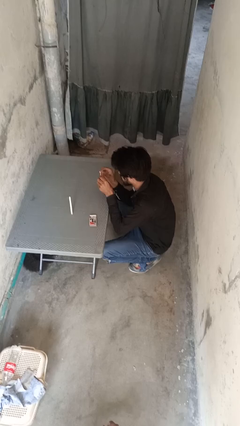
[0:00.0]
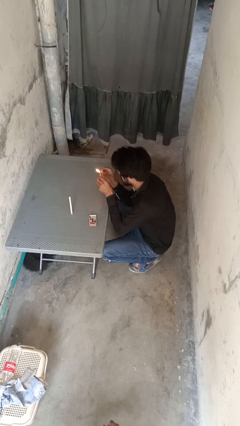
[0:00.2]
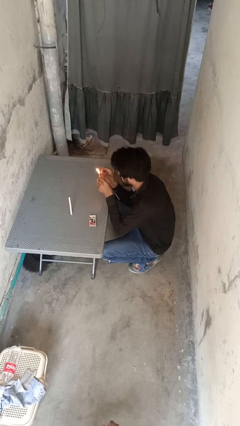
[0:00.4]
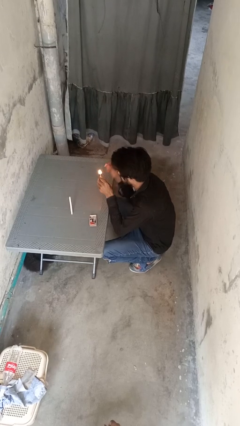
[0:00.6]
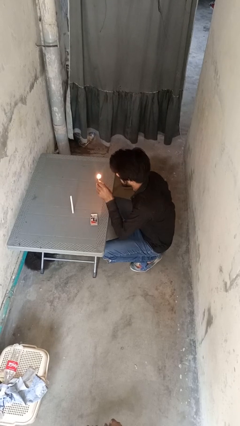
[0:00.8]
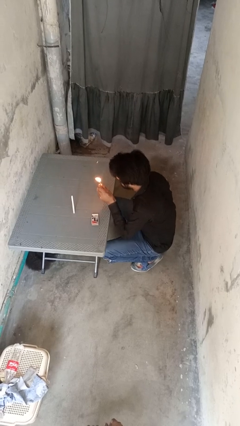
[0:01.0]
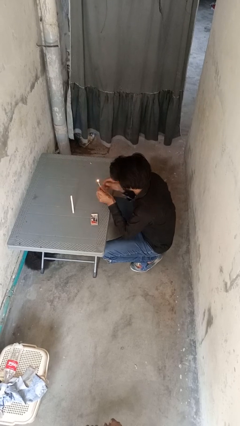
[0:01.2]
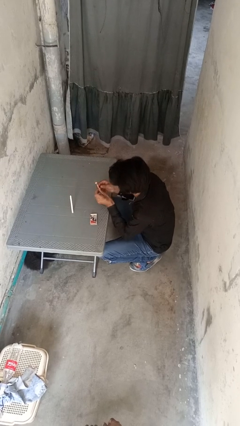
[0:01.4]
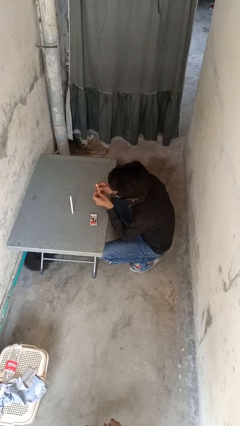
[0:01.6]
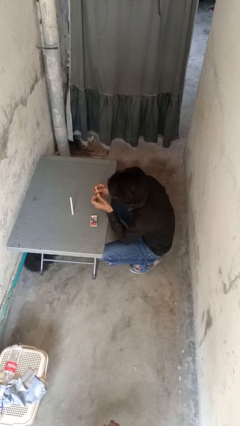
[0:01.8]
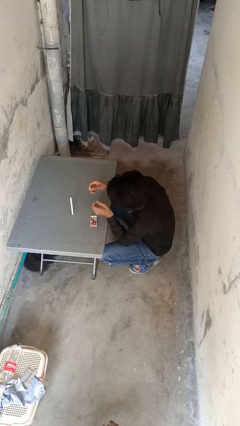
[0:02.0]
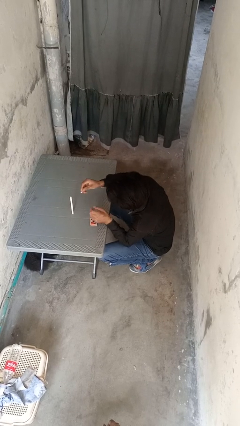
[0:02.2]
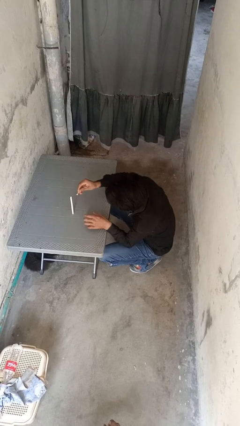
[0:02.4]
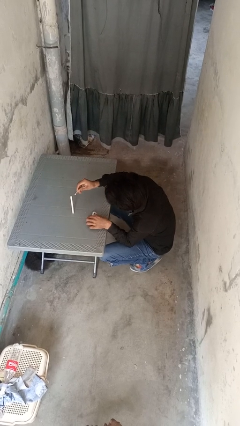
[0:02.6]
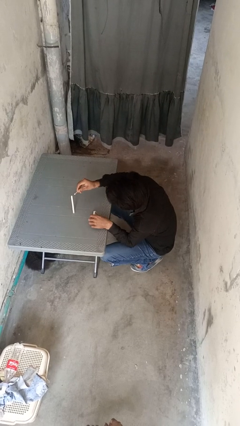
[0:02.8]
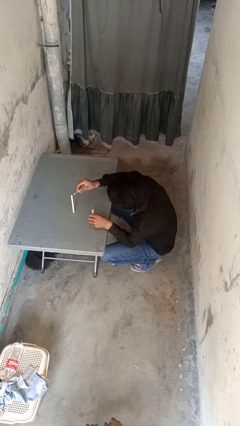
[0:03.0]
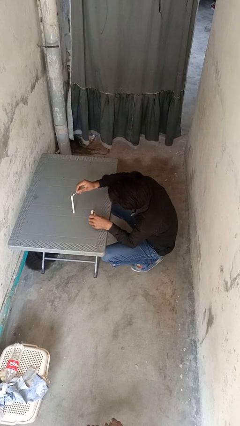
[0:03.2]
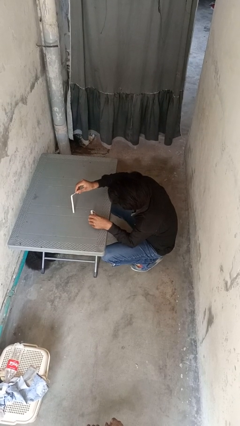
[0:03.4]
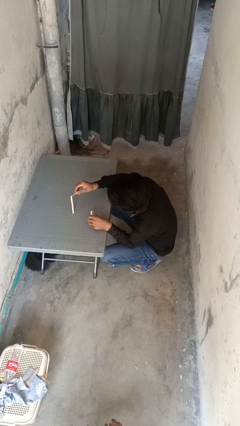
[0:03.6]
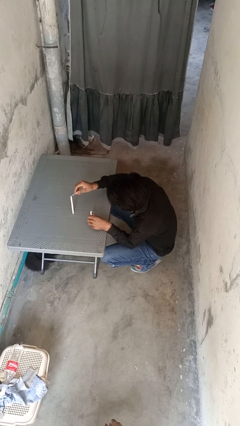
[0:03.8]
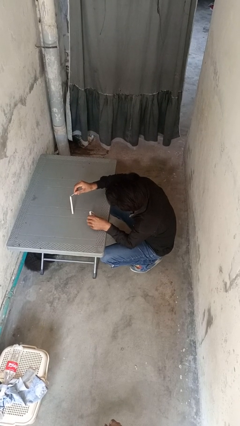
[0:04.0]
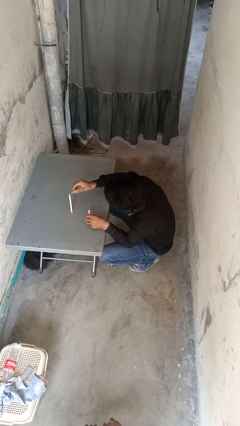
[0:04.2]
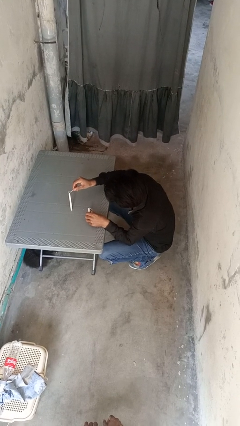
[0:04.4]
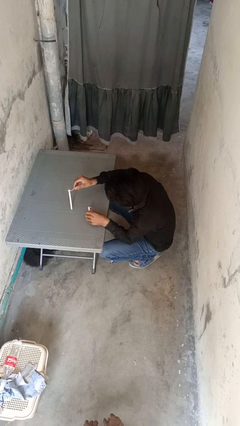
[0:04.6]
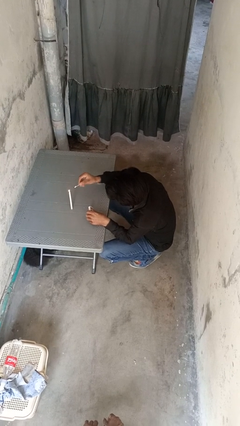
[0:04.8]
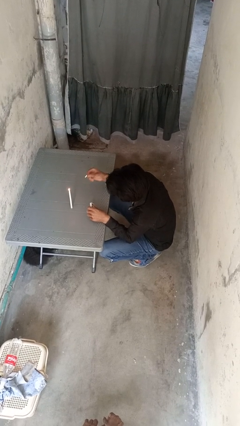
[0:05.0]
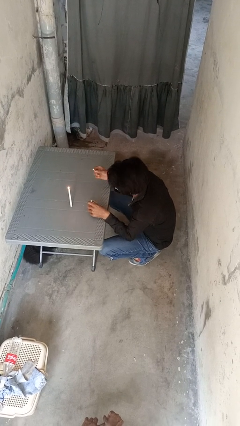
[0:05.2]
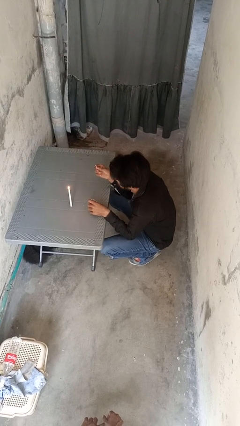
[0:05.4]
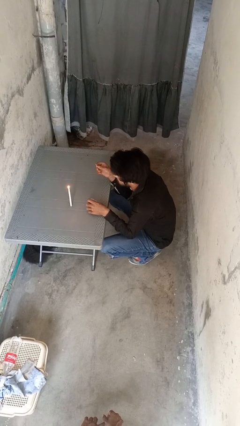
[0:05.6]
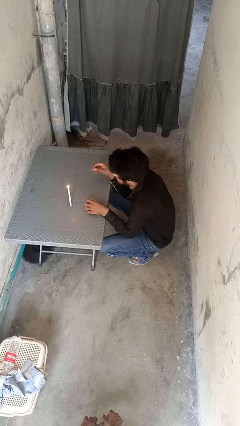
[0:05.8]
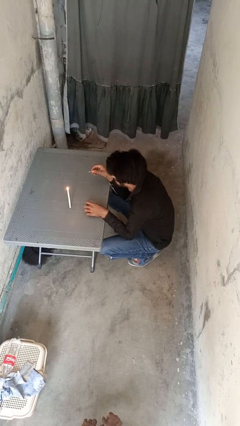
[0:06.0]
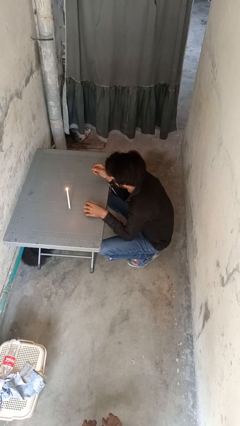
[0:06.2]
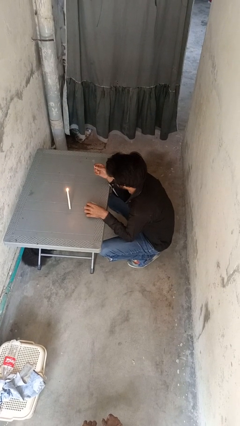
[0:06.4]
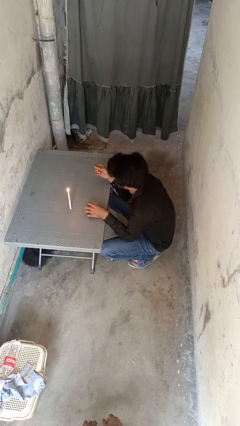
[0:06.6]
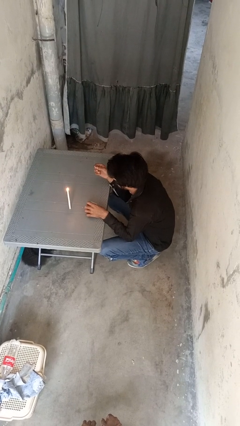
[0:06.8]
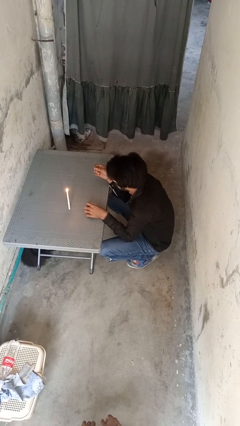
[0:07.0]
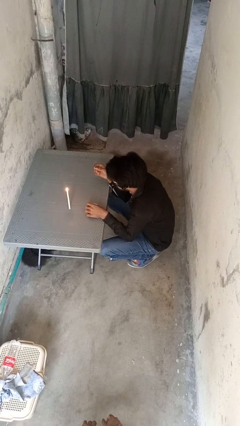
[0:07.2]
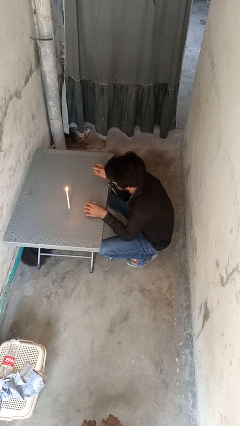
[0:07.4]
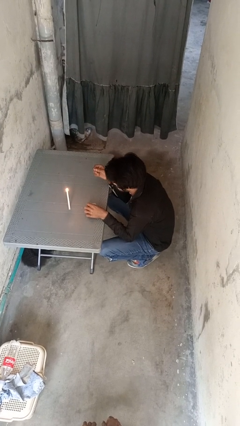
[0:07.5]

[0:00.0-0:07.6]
person lights candle

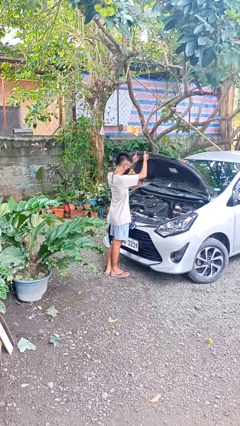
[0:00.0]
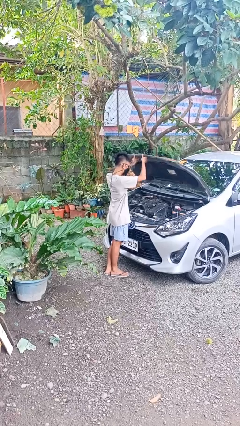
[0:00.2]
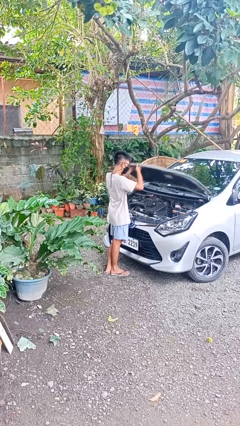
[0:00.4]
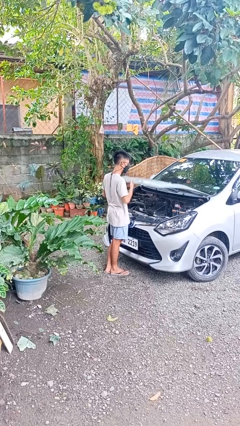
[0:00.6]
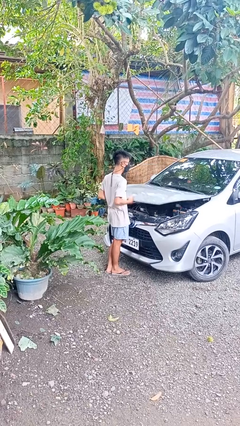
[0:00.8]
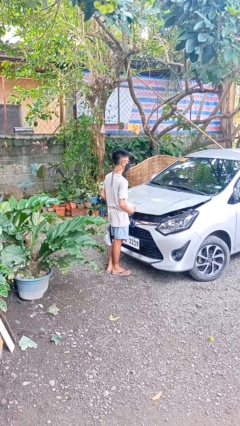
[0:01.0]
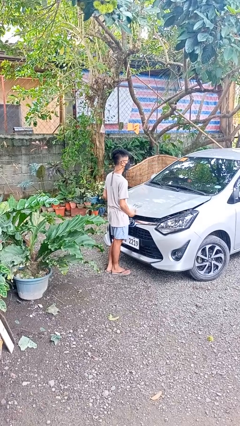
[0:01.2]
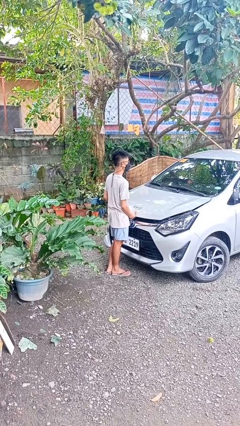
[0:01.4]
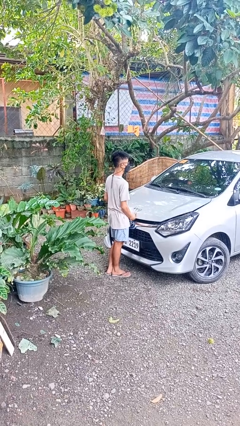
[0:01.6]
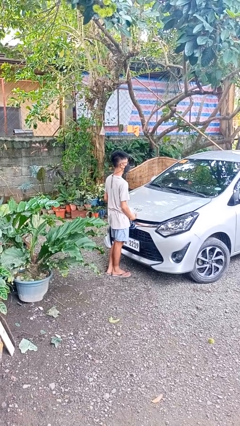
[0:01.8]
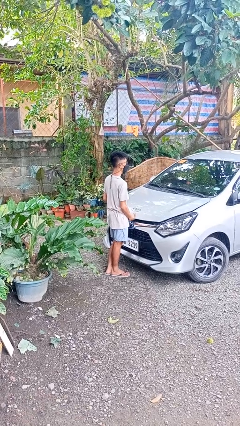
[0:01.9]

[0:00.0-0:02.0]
person closes car hood

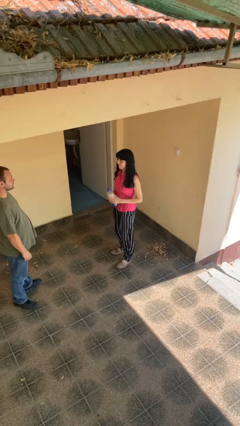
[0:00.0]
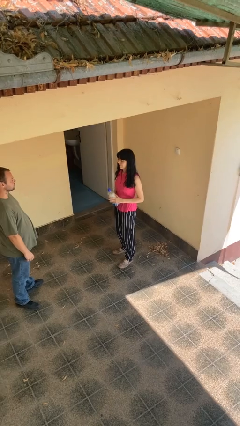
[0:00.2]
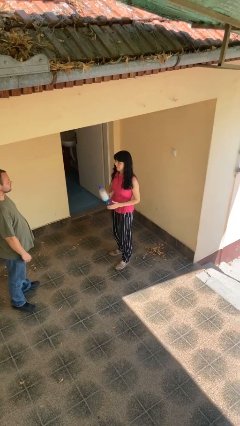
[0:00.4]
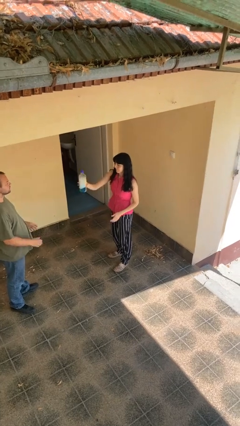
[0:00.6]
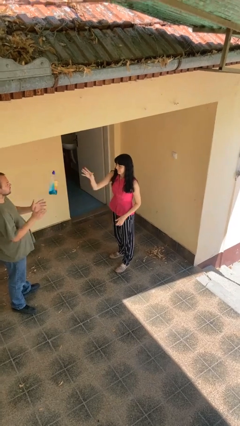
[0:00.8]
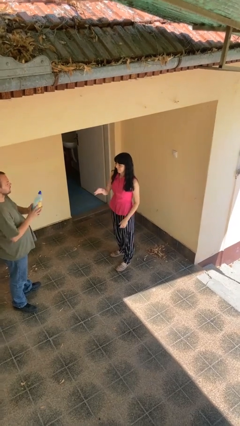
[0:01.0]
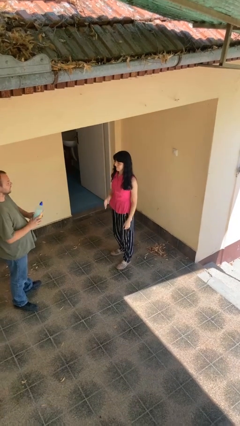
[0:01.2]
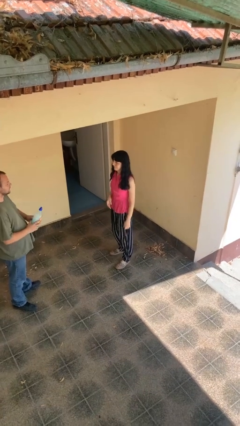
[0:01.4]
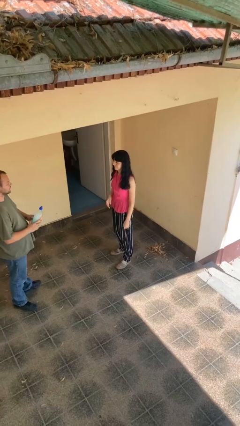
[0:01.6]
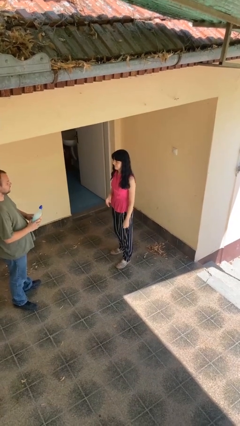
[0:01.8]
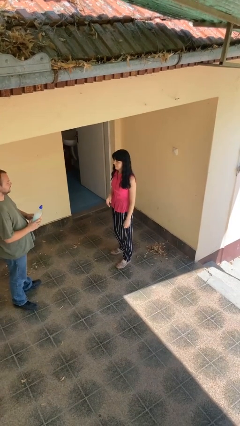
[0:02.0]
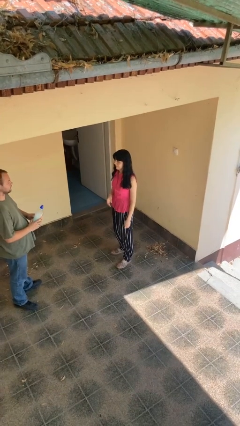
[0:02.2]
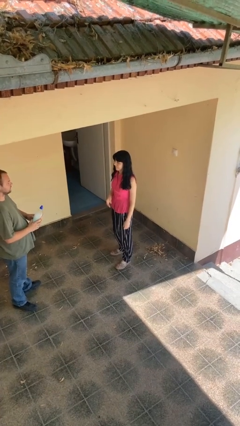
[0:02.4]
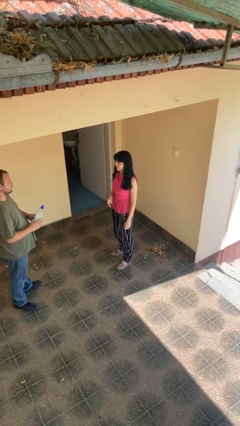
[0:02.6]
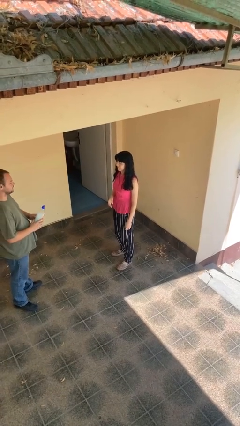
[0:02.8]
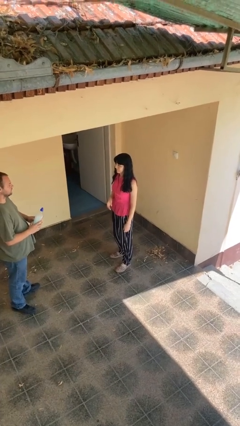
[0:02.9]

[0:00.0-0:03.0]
person throws object to person

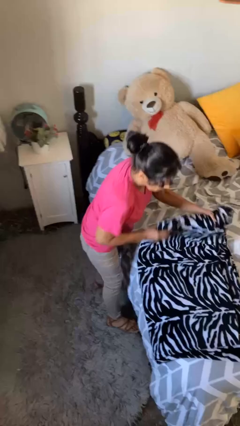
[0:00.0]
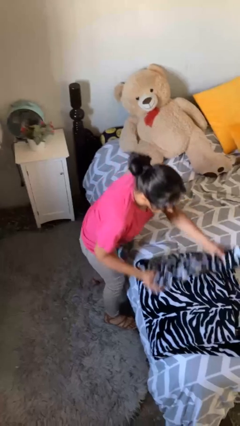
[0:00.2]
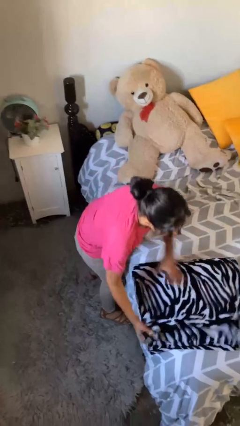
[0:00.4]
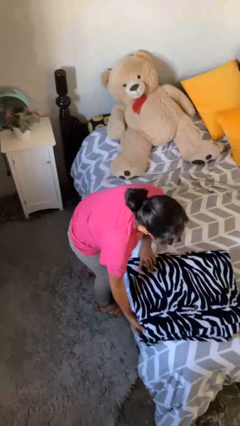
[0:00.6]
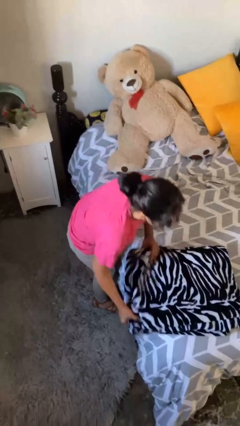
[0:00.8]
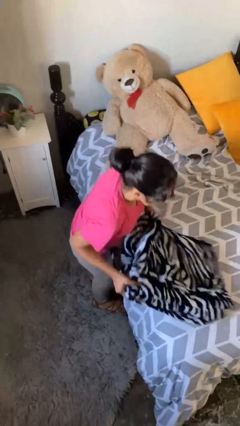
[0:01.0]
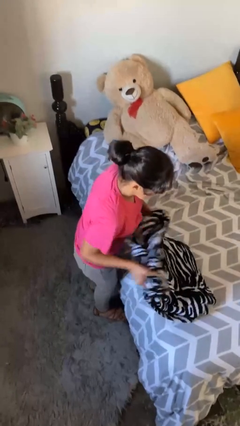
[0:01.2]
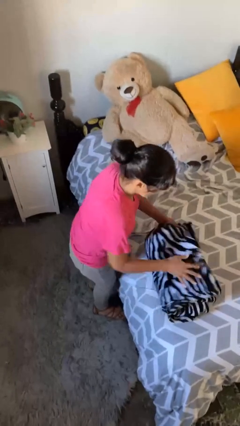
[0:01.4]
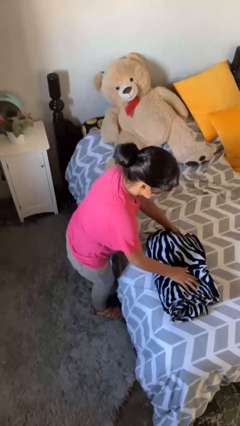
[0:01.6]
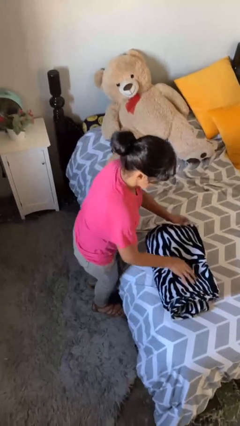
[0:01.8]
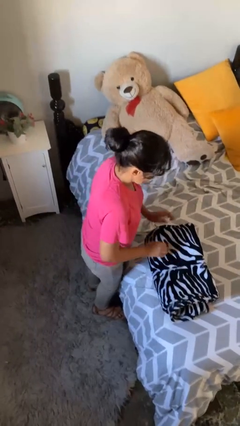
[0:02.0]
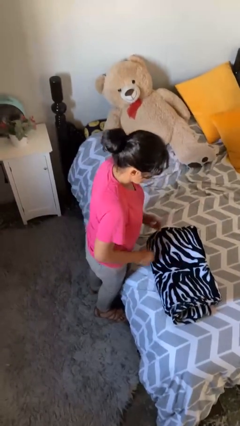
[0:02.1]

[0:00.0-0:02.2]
person folds blanket

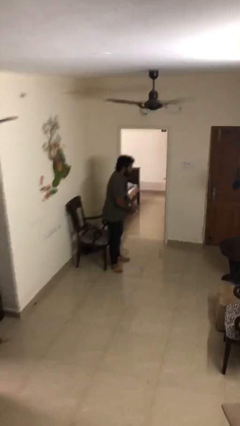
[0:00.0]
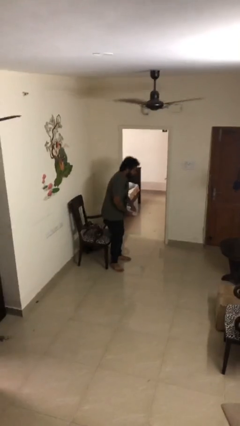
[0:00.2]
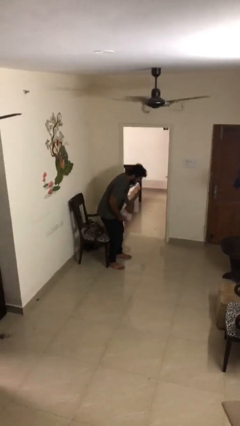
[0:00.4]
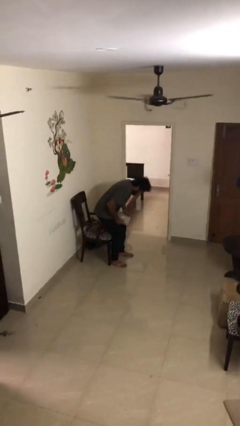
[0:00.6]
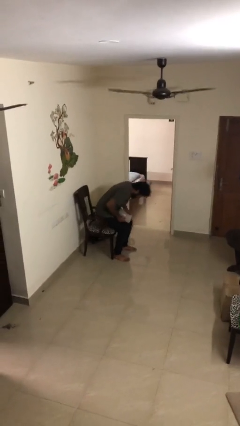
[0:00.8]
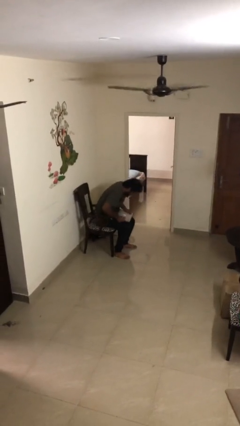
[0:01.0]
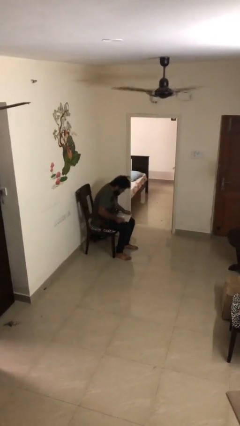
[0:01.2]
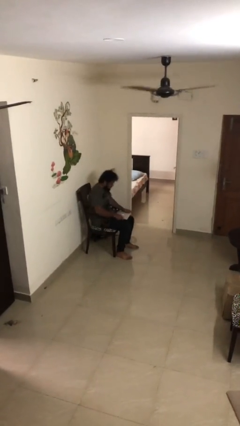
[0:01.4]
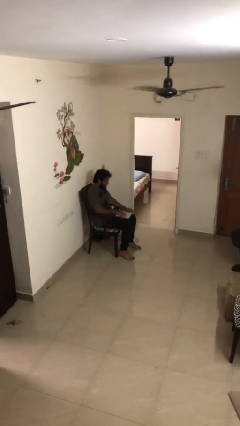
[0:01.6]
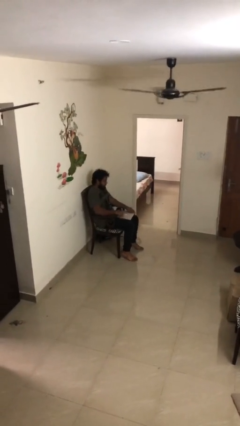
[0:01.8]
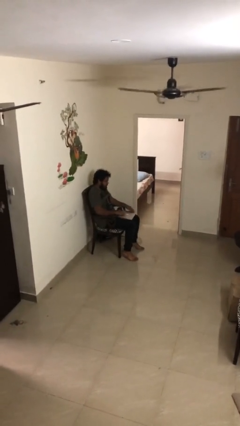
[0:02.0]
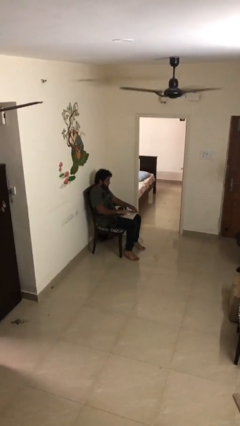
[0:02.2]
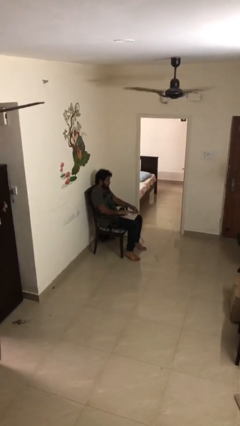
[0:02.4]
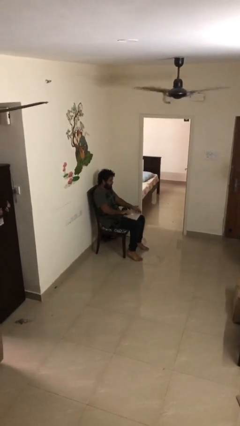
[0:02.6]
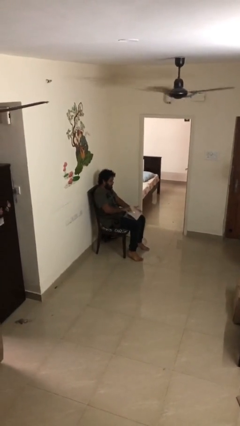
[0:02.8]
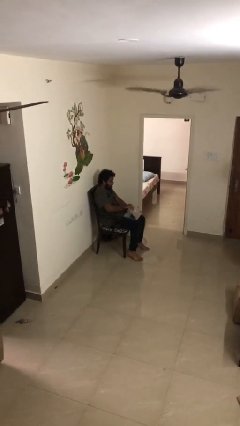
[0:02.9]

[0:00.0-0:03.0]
person sits down
